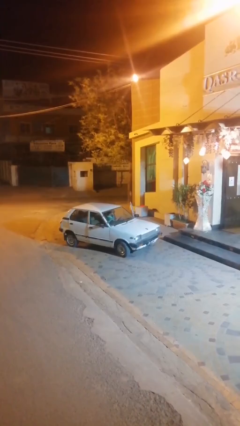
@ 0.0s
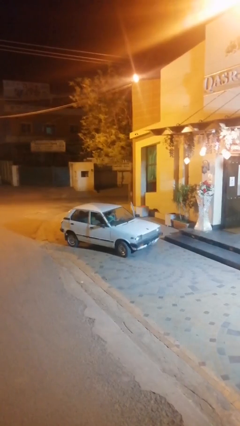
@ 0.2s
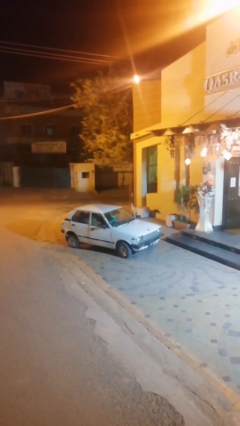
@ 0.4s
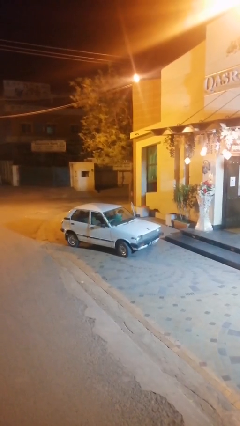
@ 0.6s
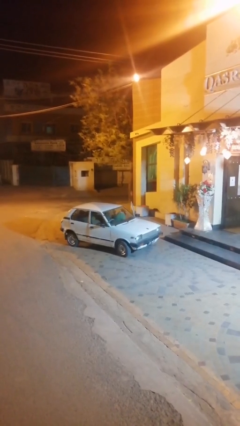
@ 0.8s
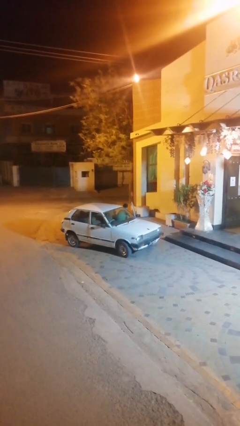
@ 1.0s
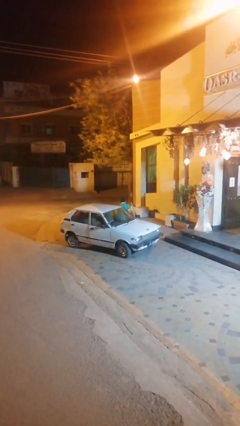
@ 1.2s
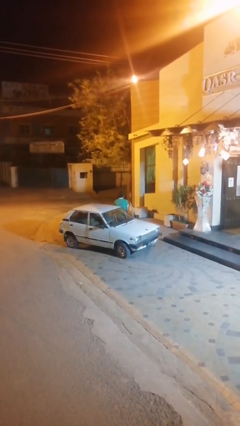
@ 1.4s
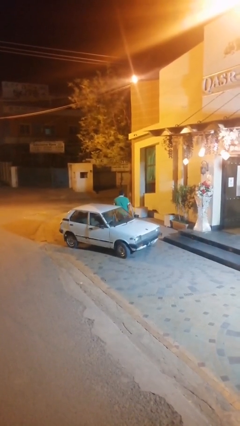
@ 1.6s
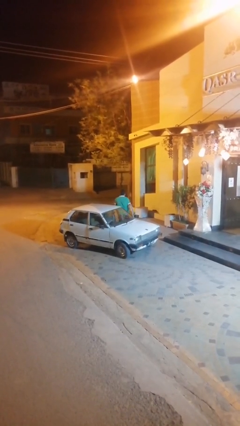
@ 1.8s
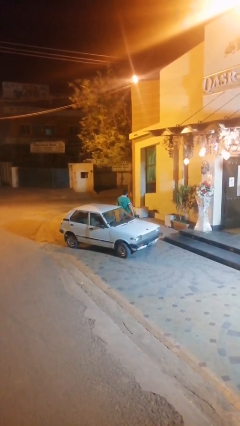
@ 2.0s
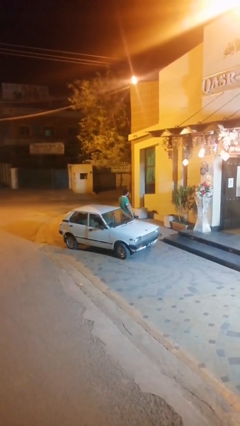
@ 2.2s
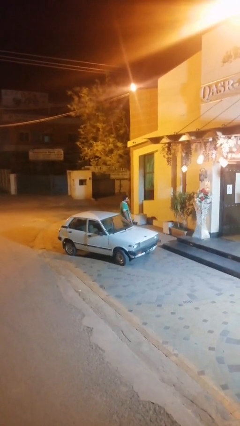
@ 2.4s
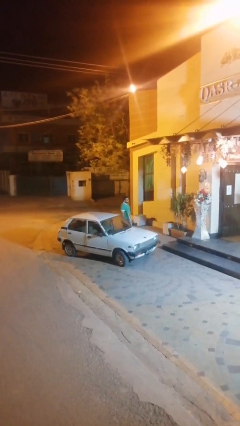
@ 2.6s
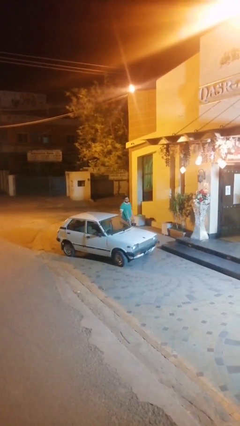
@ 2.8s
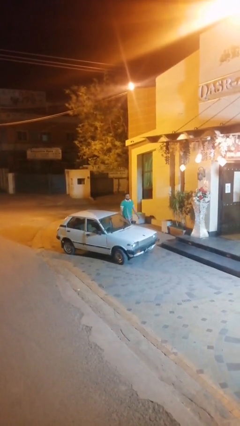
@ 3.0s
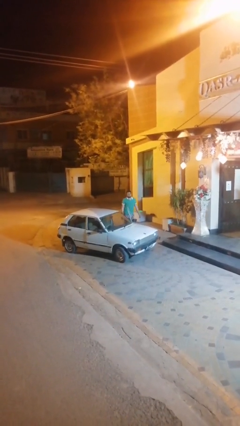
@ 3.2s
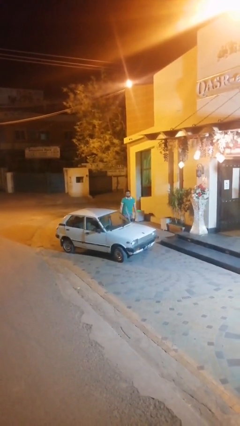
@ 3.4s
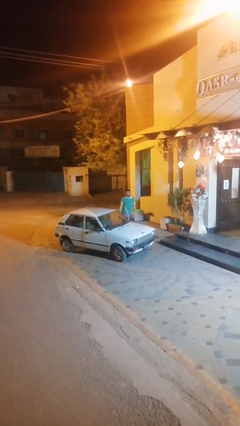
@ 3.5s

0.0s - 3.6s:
person exits car

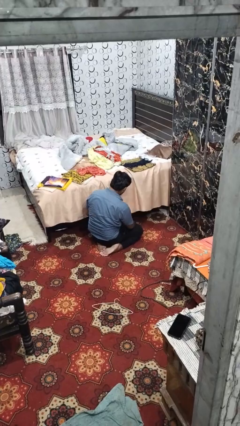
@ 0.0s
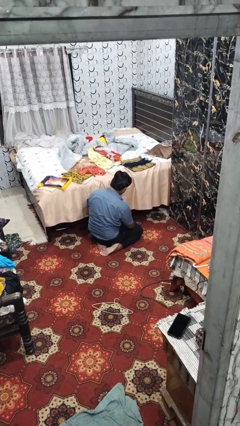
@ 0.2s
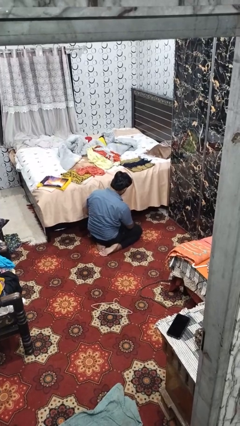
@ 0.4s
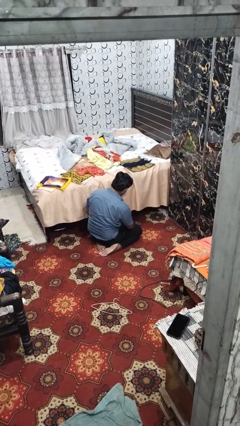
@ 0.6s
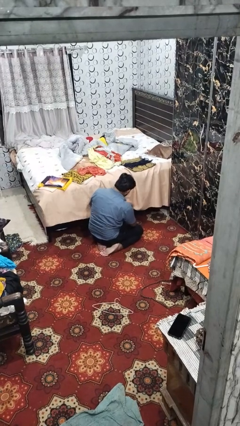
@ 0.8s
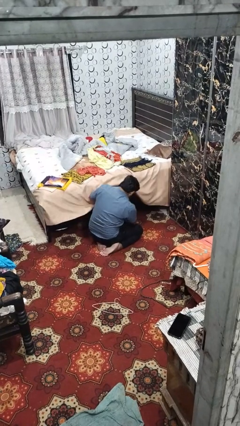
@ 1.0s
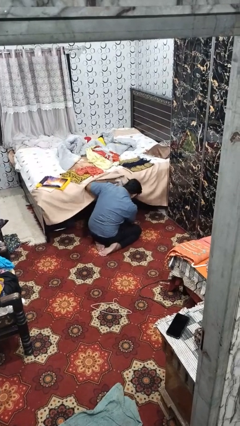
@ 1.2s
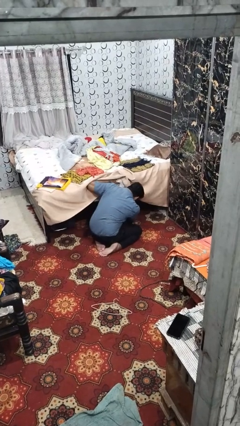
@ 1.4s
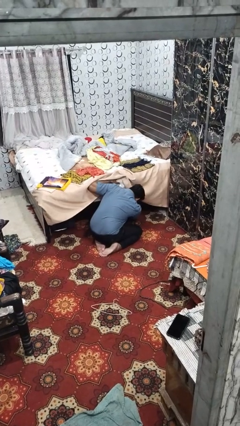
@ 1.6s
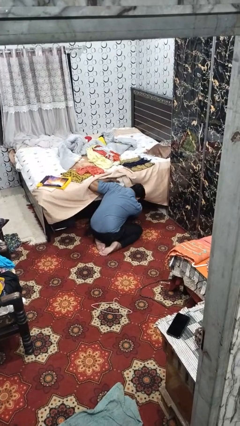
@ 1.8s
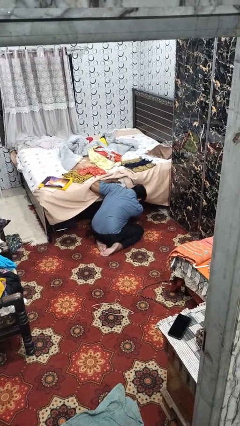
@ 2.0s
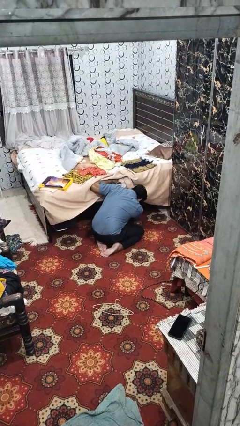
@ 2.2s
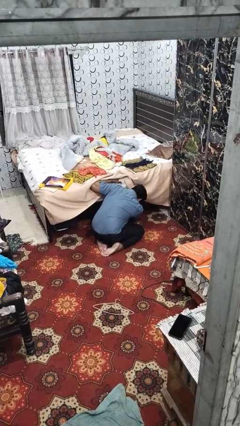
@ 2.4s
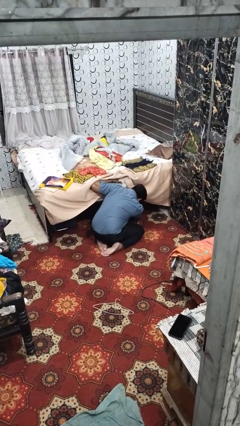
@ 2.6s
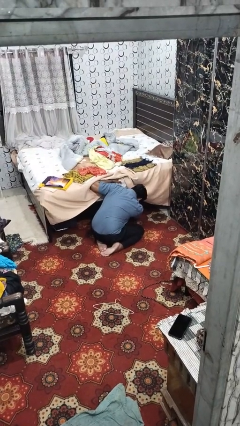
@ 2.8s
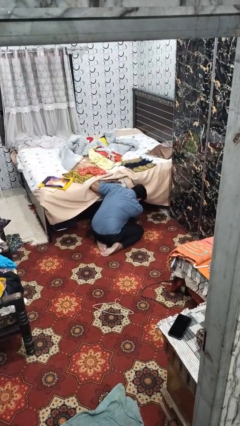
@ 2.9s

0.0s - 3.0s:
person searches under bed

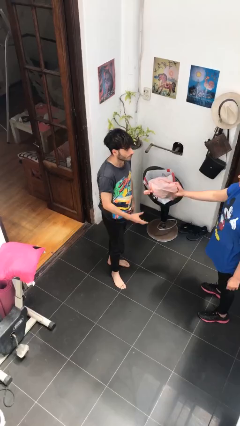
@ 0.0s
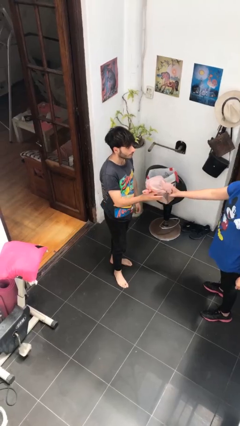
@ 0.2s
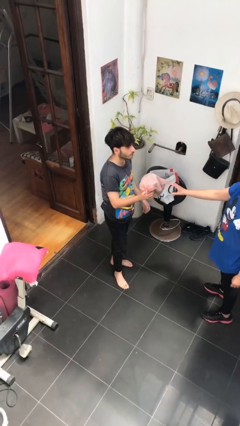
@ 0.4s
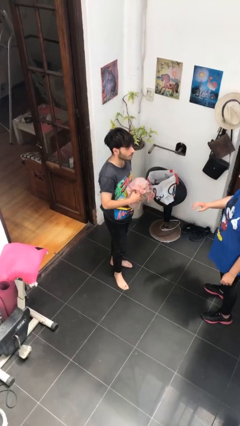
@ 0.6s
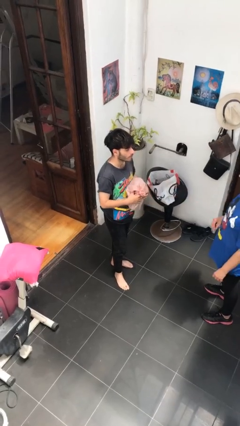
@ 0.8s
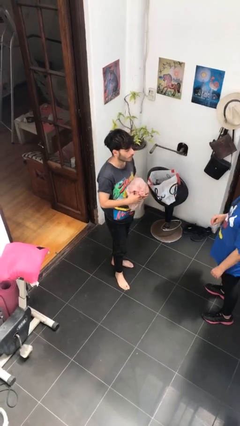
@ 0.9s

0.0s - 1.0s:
person transfers object to person

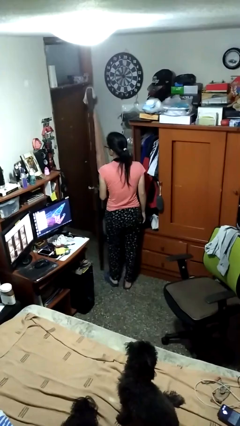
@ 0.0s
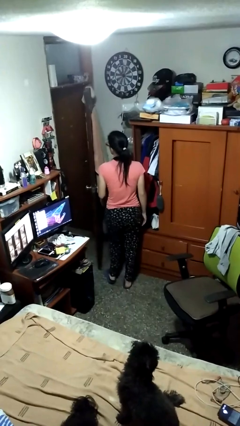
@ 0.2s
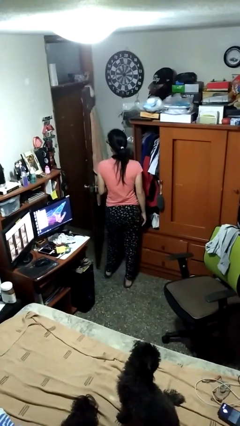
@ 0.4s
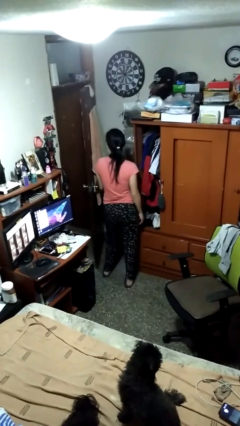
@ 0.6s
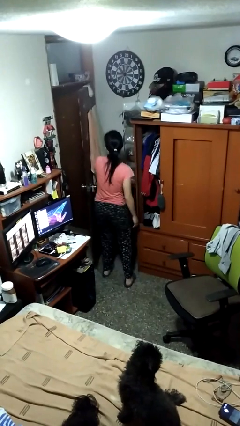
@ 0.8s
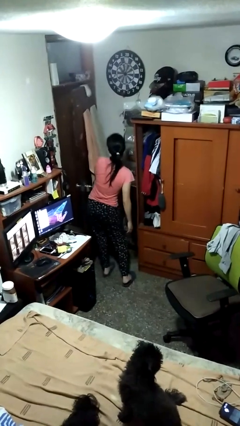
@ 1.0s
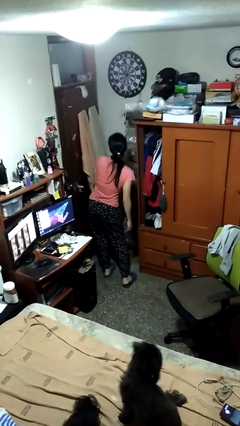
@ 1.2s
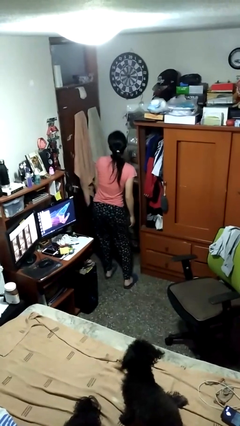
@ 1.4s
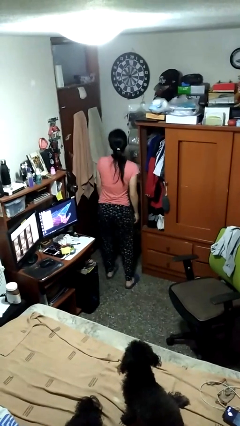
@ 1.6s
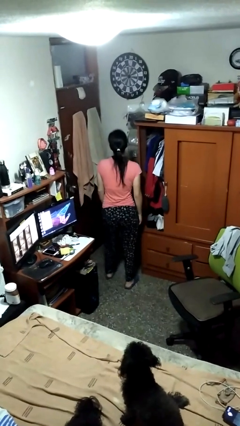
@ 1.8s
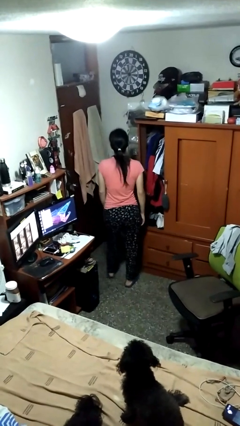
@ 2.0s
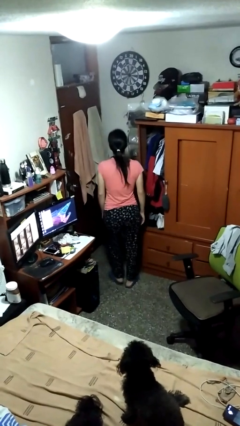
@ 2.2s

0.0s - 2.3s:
person closes door with hip

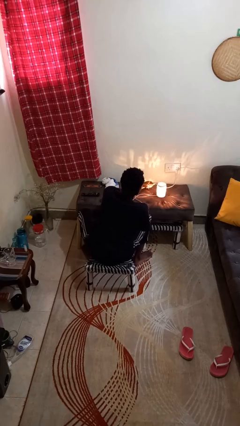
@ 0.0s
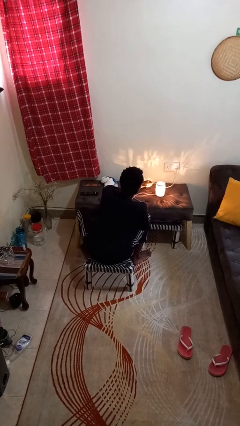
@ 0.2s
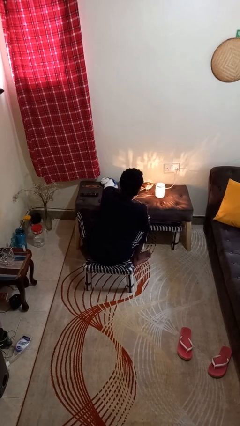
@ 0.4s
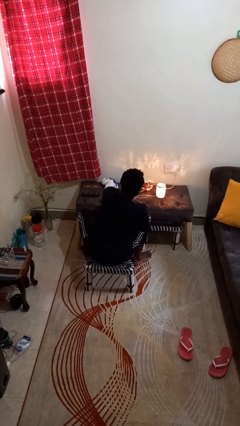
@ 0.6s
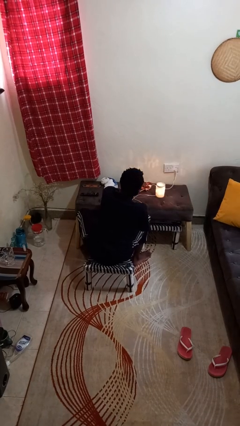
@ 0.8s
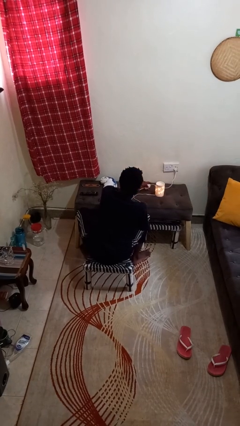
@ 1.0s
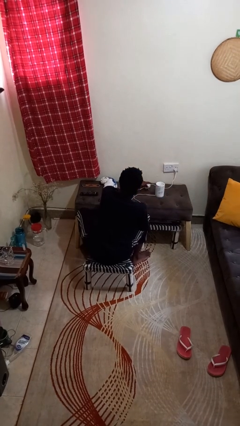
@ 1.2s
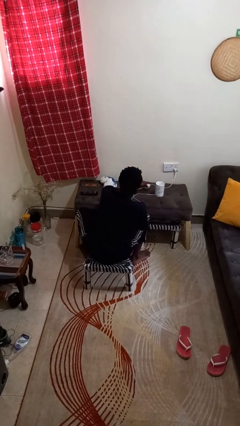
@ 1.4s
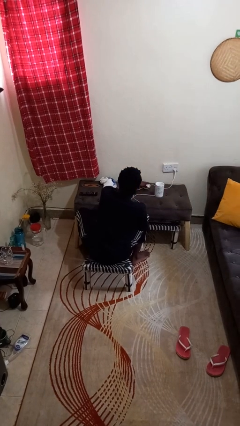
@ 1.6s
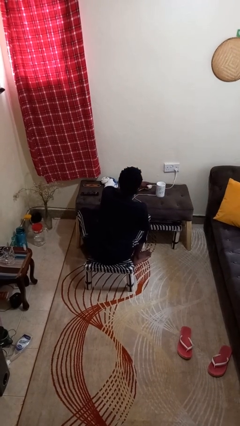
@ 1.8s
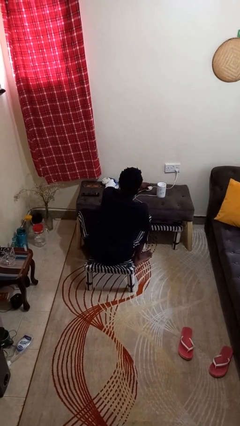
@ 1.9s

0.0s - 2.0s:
person turns off fan

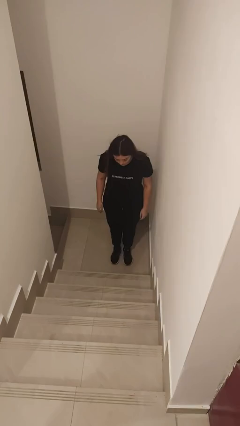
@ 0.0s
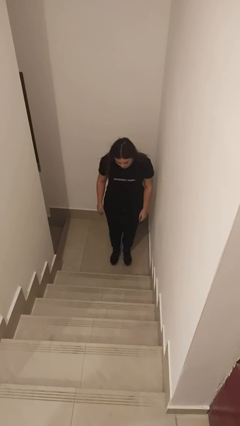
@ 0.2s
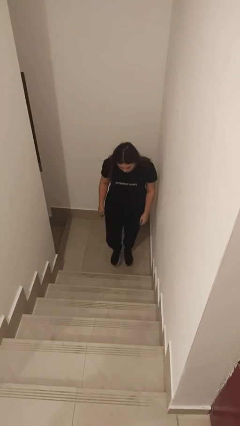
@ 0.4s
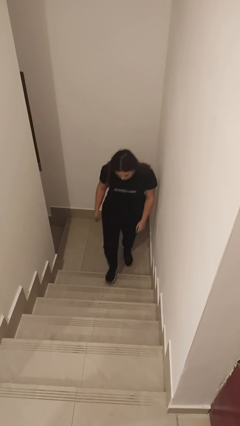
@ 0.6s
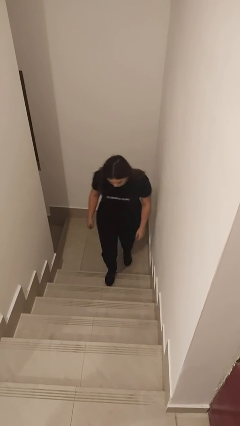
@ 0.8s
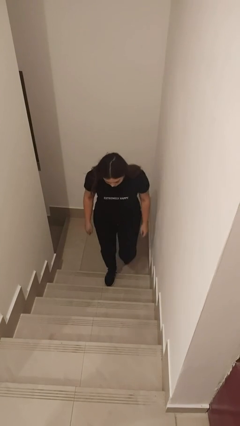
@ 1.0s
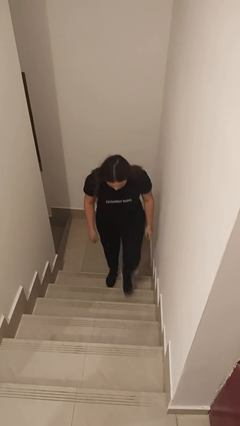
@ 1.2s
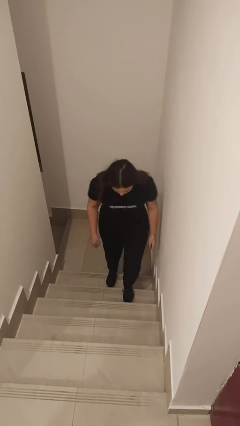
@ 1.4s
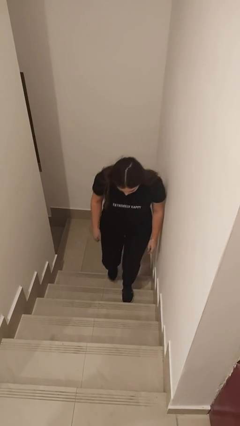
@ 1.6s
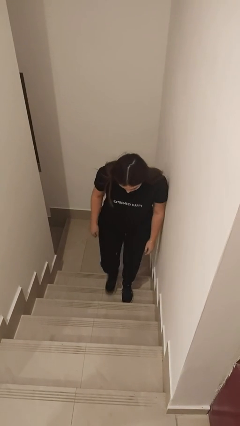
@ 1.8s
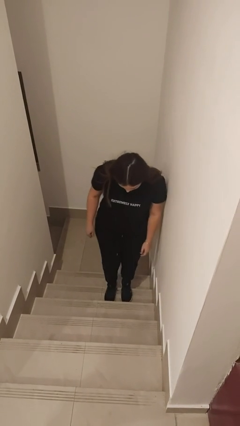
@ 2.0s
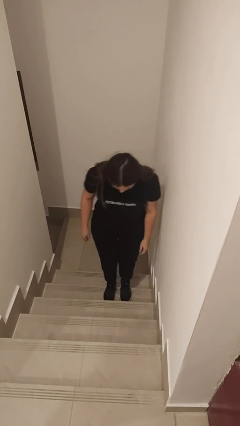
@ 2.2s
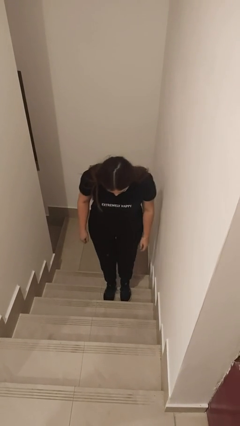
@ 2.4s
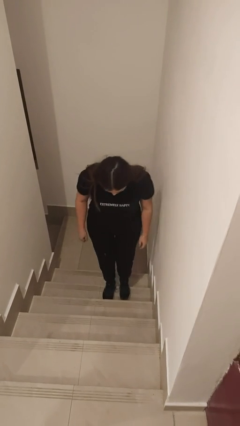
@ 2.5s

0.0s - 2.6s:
person climbs up stairs

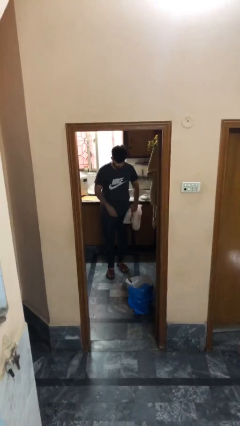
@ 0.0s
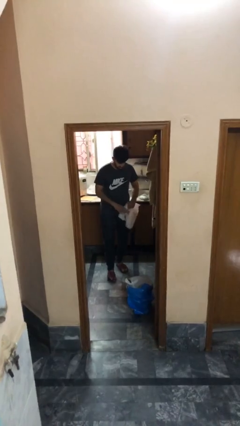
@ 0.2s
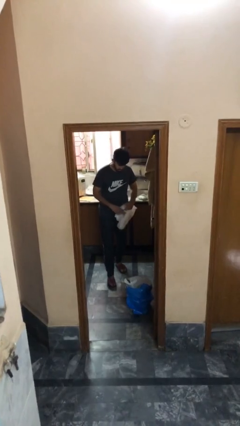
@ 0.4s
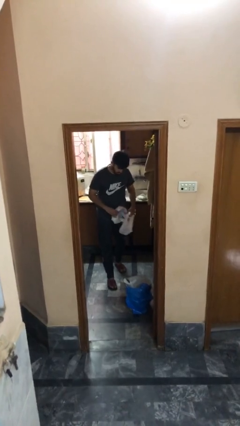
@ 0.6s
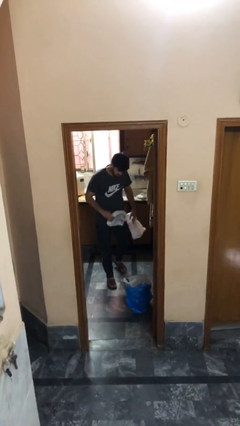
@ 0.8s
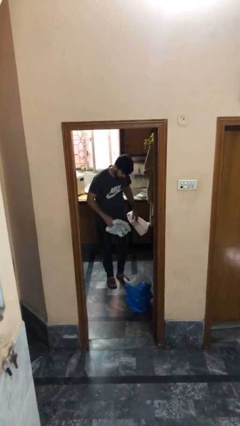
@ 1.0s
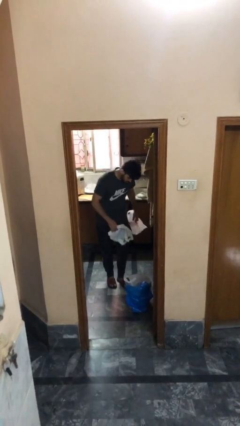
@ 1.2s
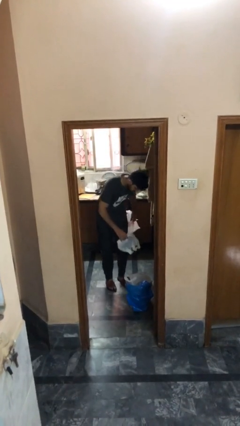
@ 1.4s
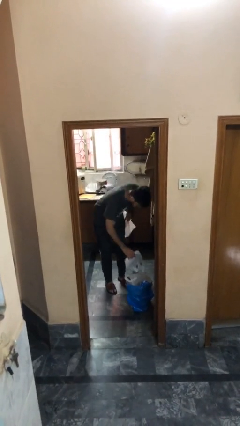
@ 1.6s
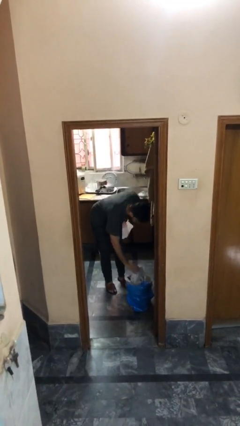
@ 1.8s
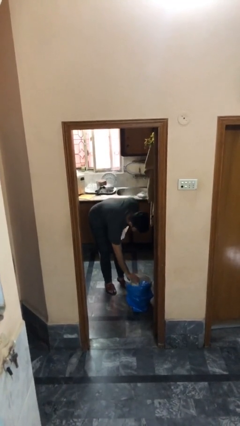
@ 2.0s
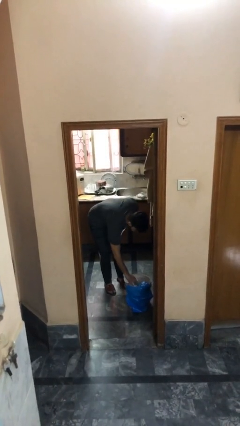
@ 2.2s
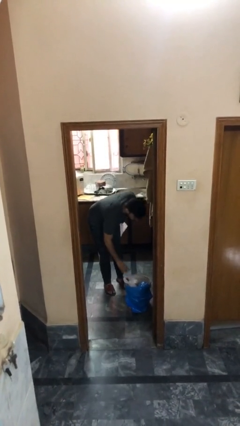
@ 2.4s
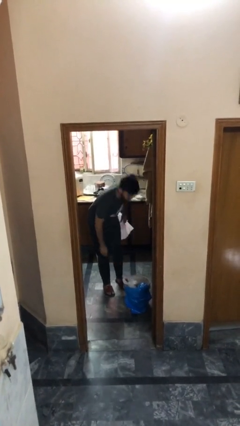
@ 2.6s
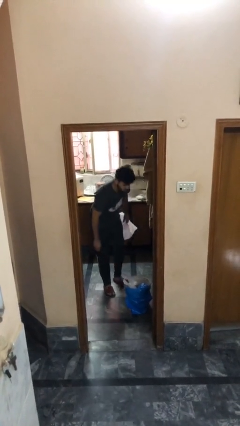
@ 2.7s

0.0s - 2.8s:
person discards trash
